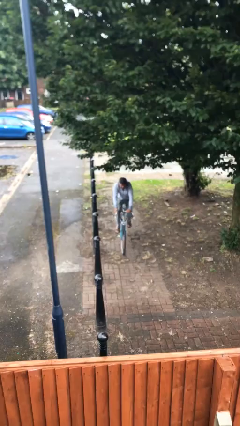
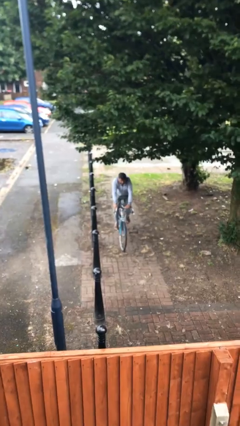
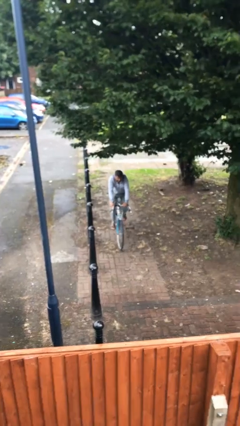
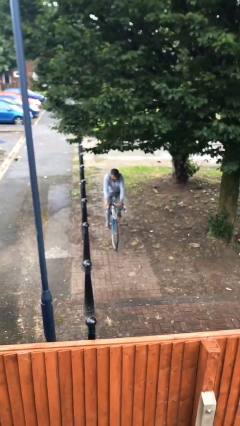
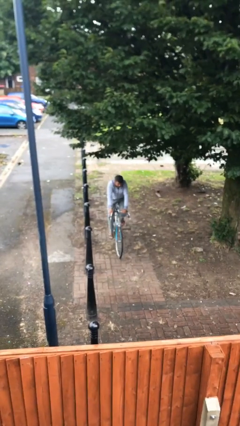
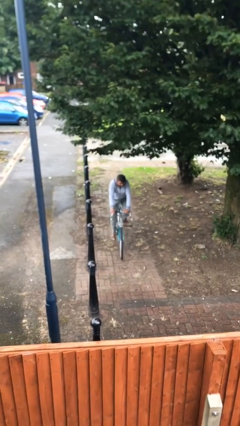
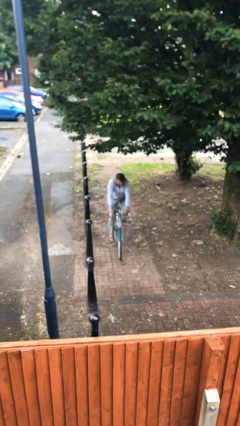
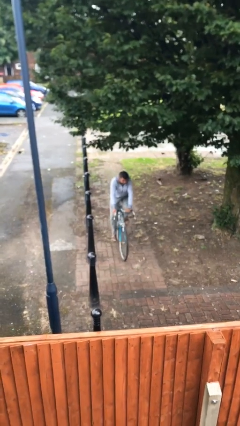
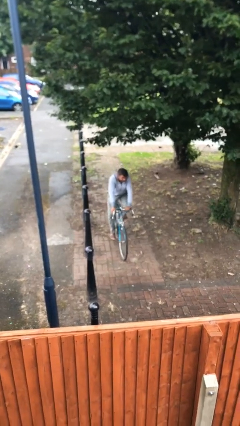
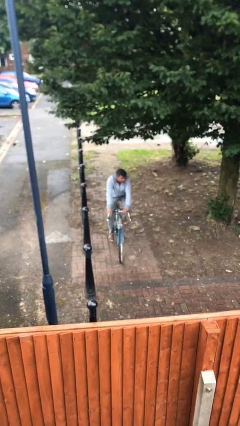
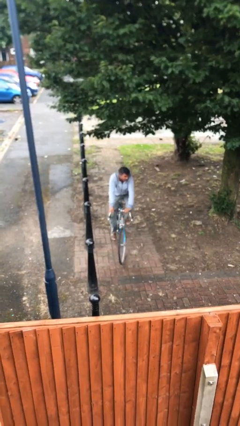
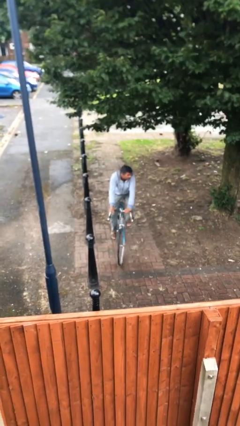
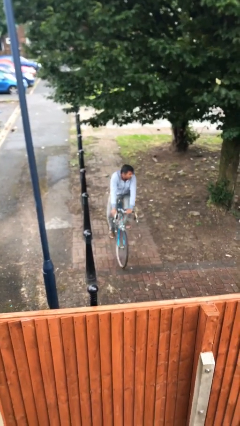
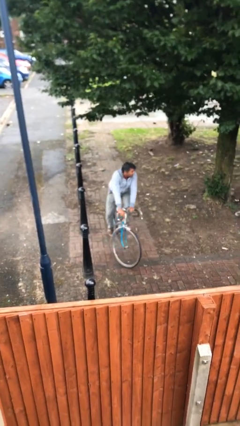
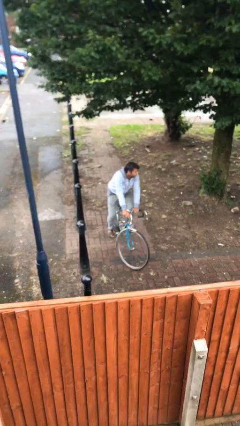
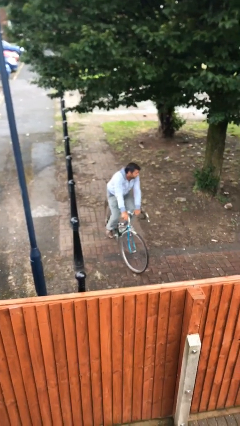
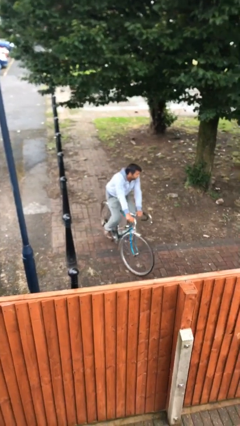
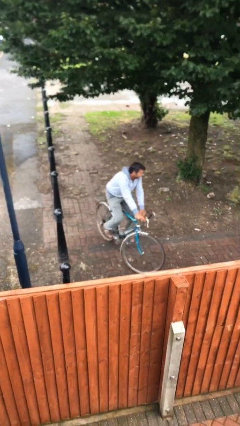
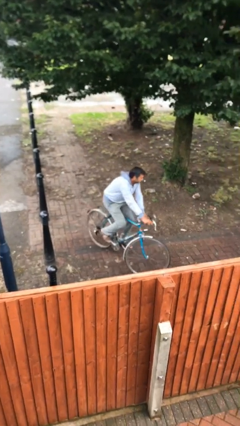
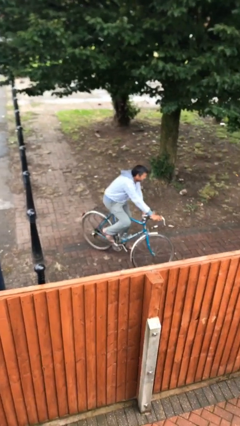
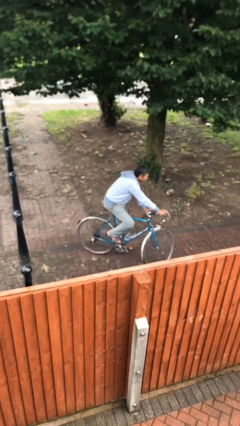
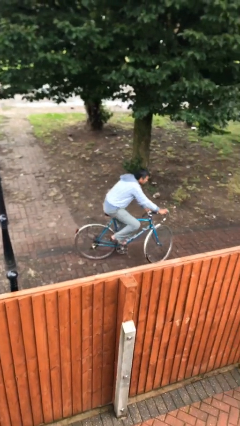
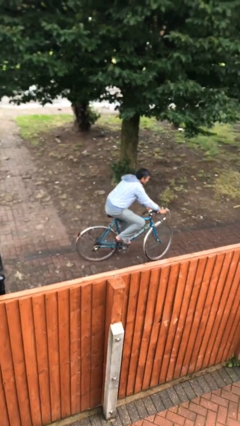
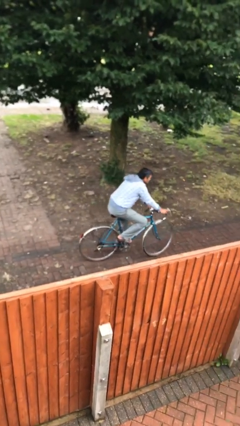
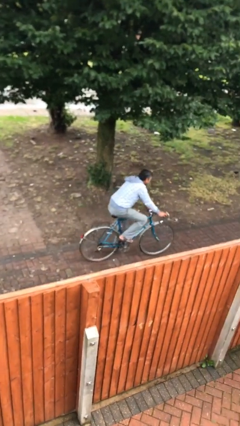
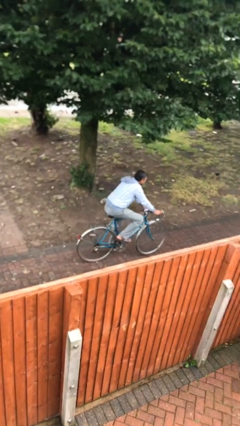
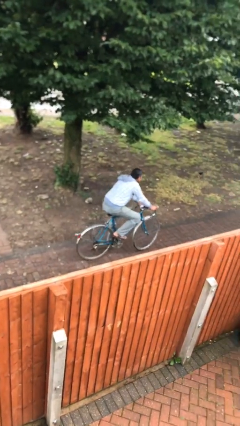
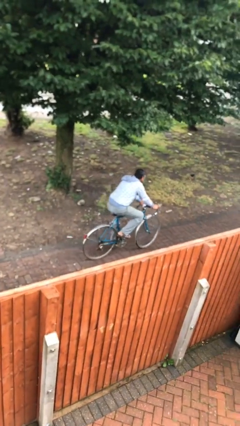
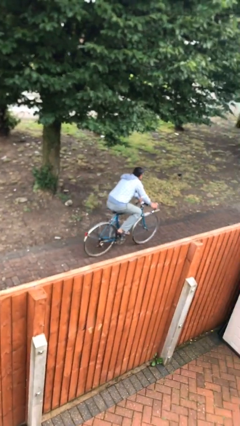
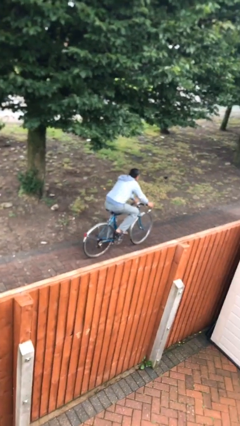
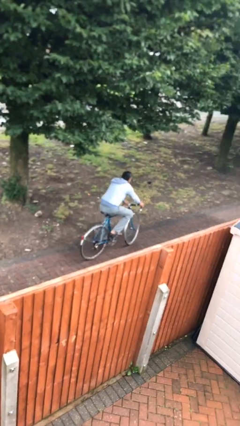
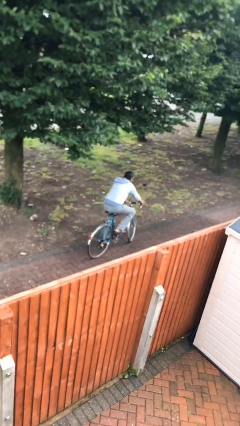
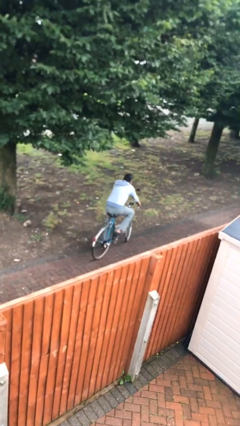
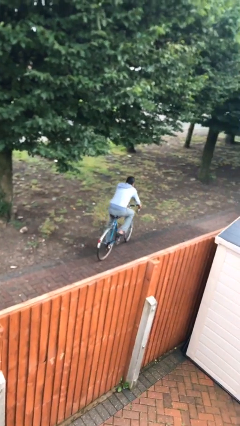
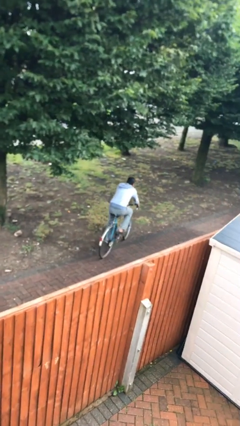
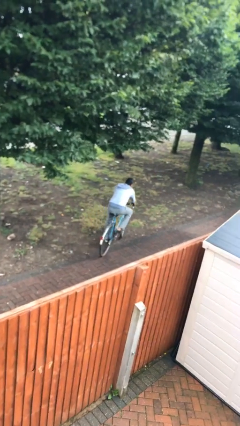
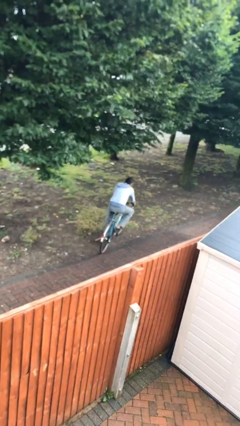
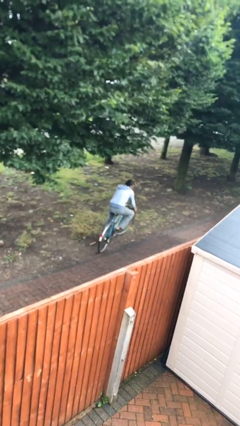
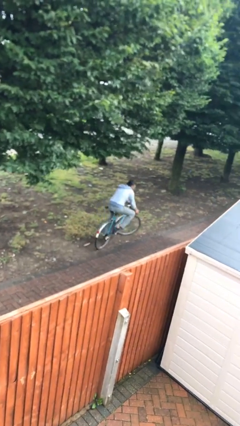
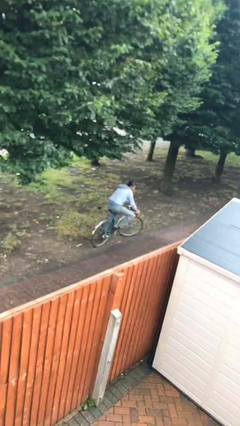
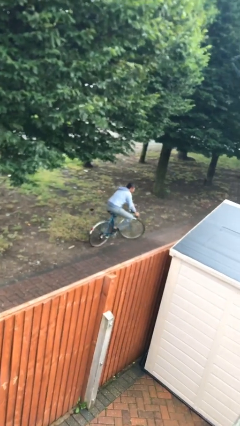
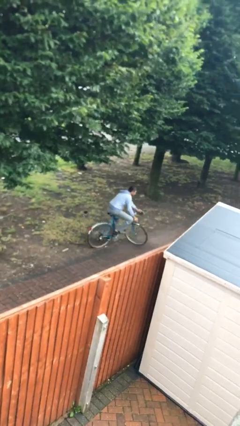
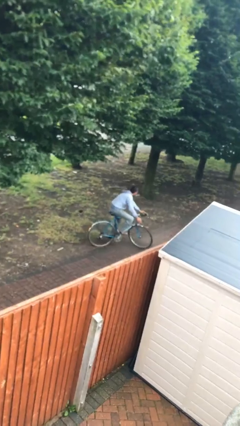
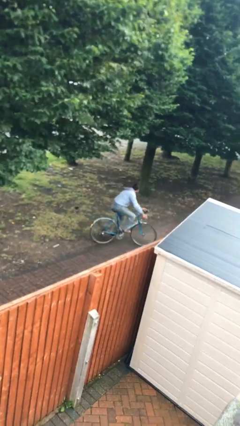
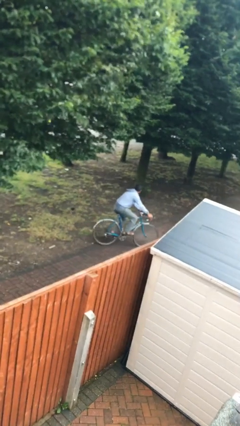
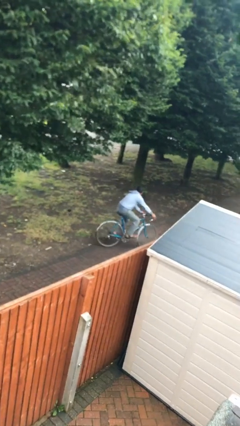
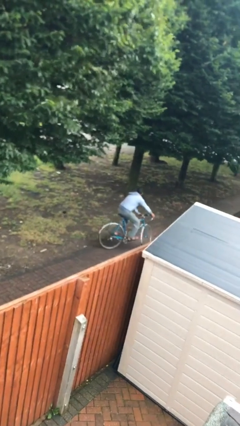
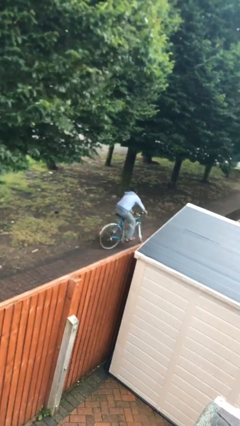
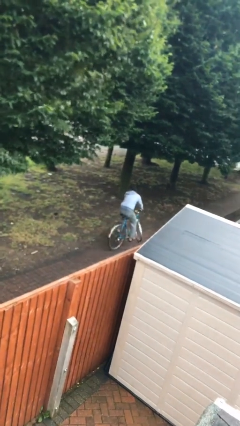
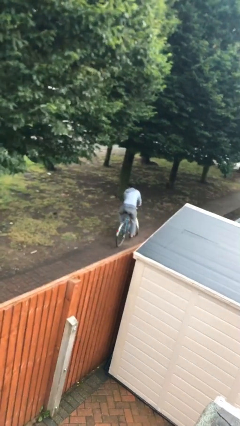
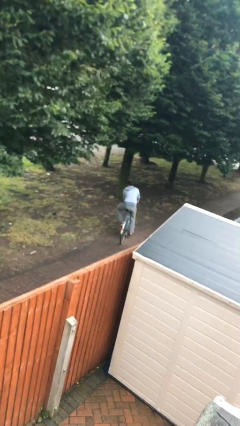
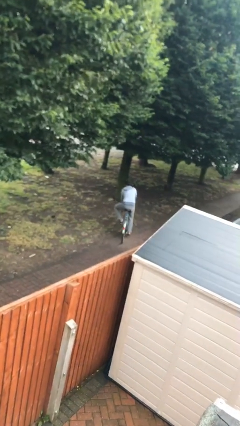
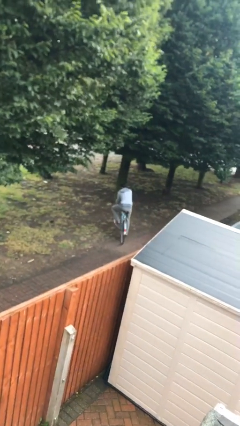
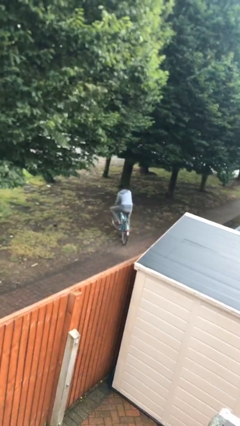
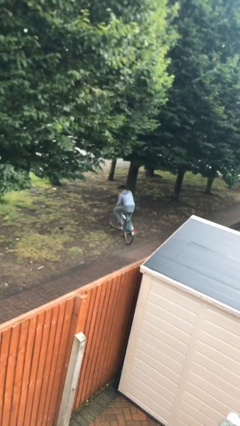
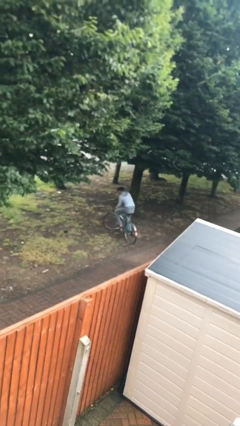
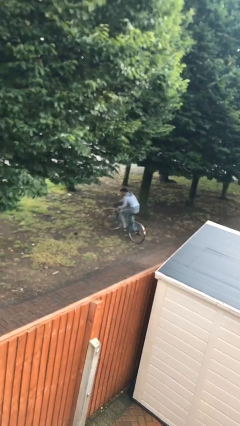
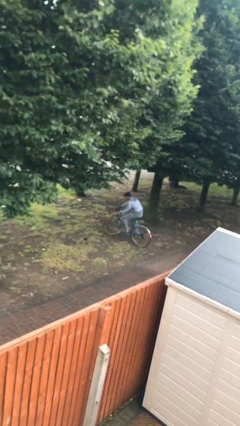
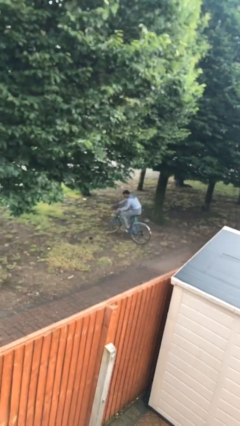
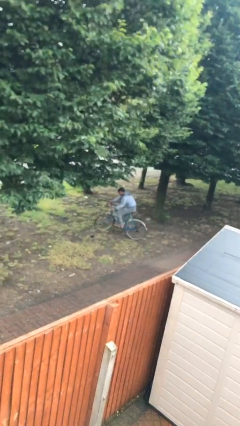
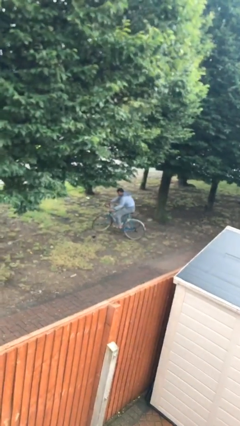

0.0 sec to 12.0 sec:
person rides bicycle

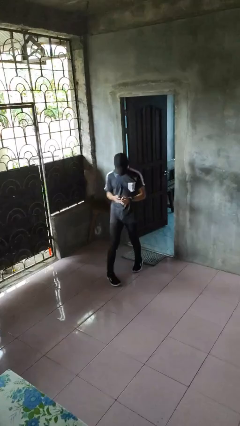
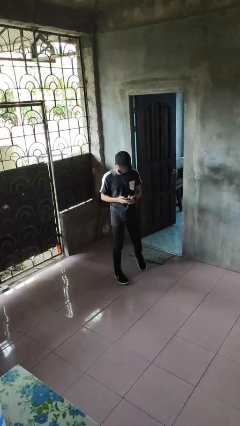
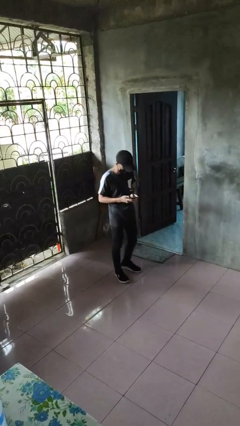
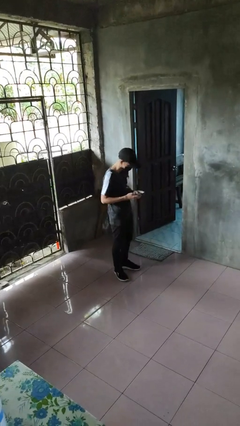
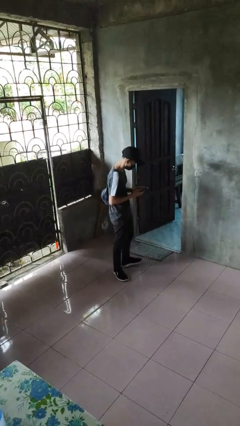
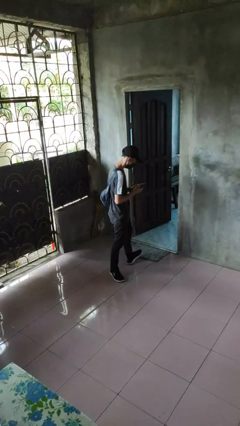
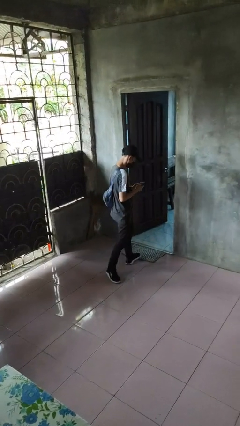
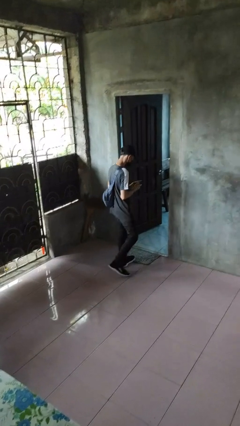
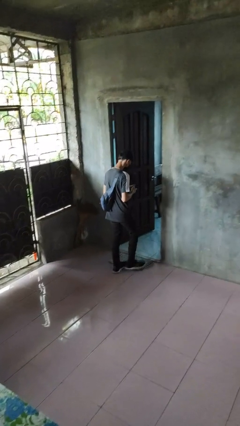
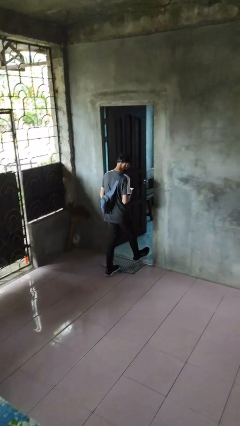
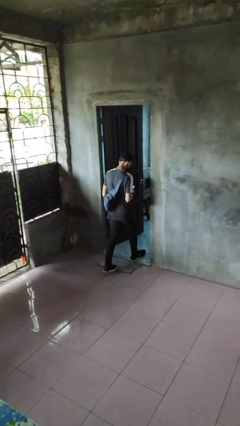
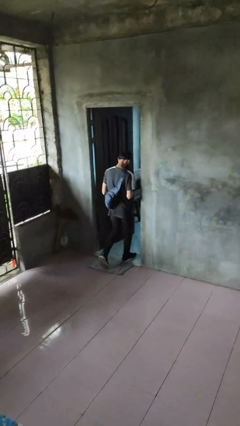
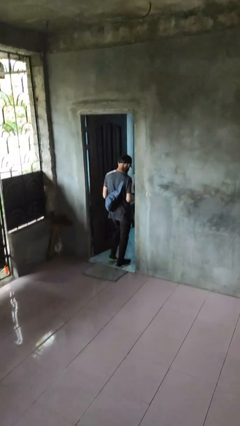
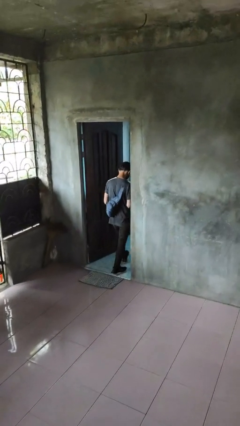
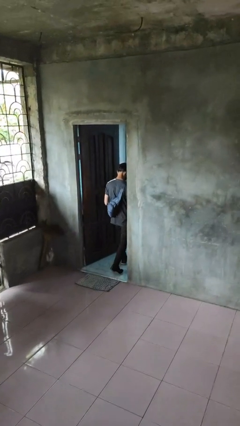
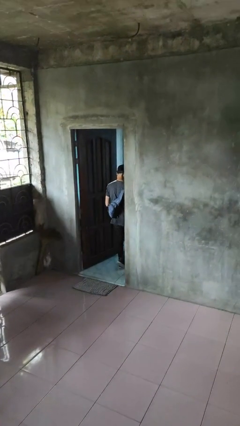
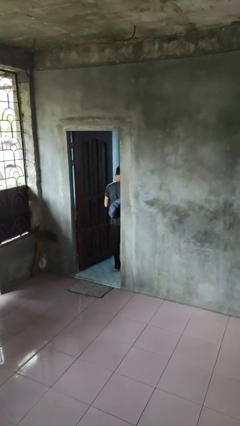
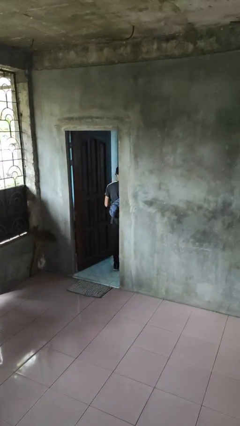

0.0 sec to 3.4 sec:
person exits scene through structure

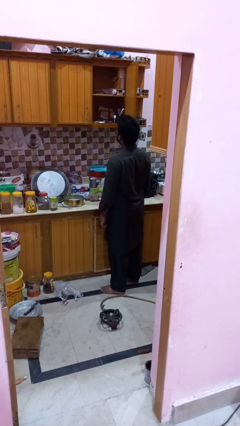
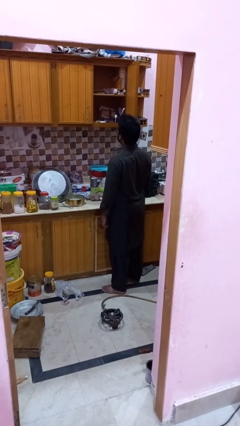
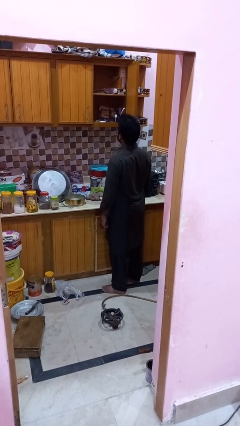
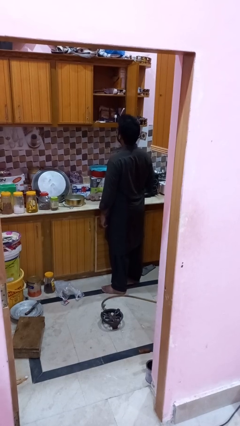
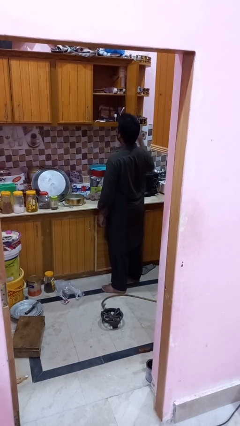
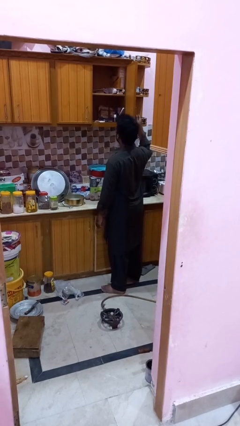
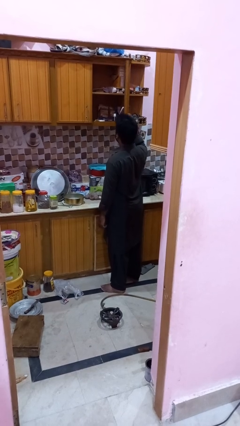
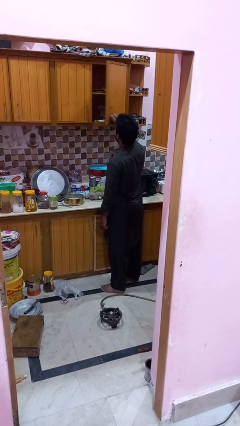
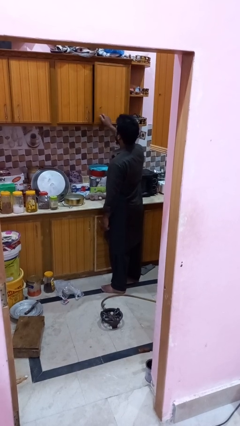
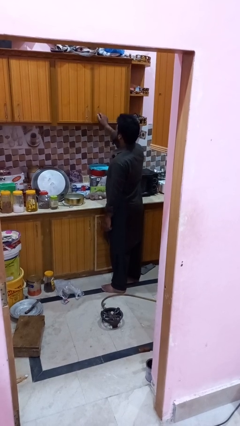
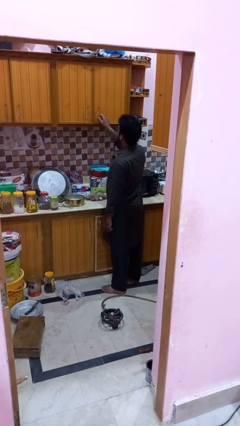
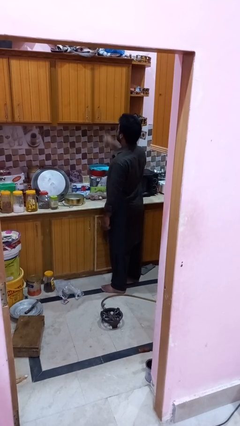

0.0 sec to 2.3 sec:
person closes cabinet

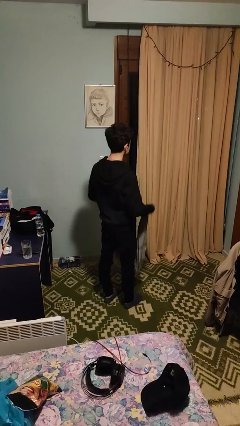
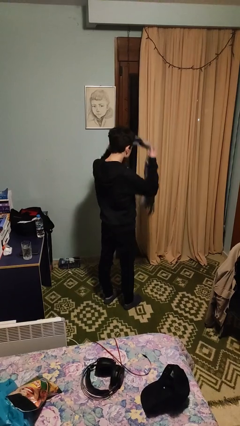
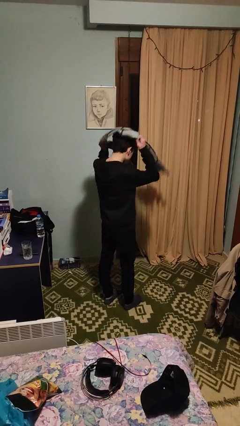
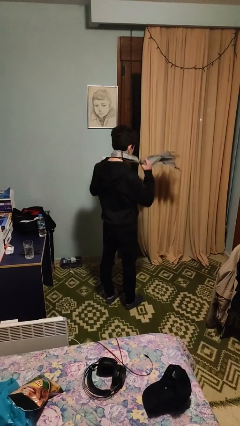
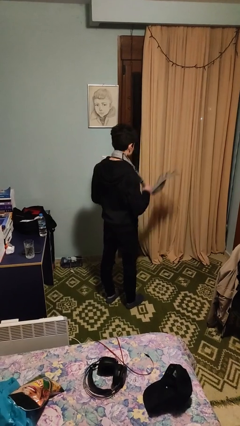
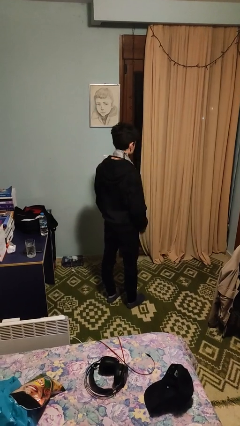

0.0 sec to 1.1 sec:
person puts on scarf
